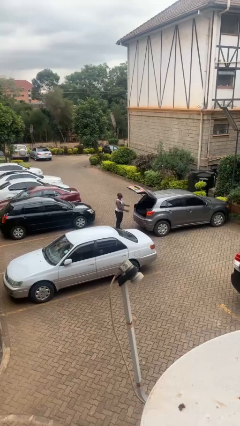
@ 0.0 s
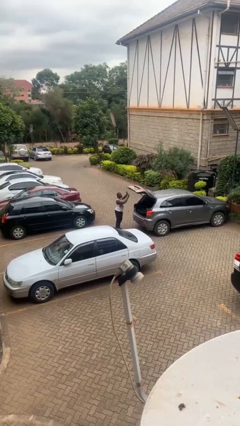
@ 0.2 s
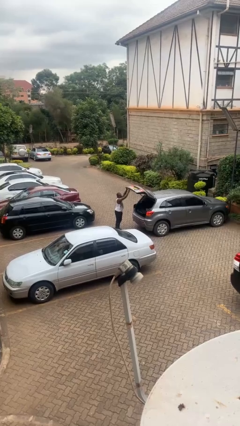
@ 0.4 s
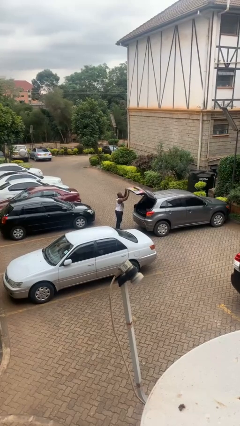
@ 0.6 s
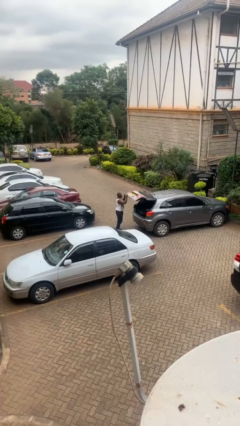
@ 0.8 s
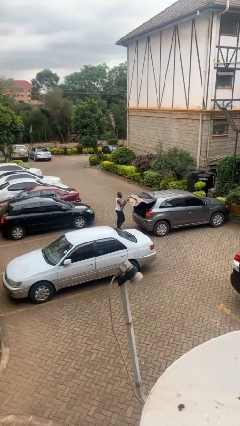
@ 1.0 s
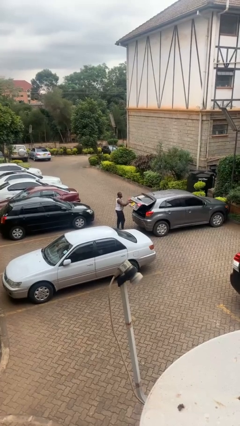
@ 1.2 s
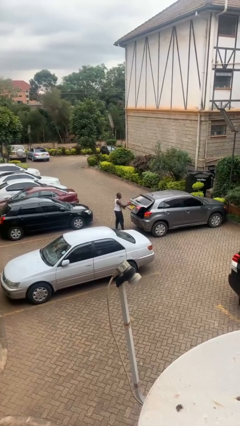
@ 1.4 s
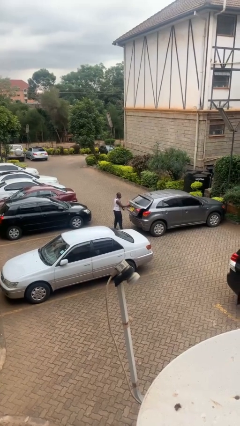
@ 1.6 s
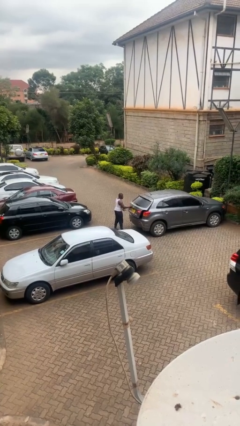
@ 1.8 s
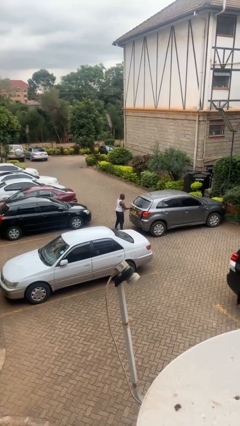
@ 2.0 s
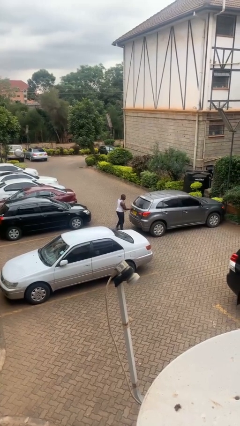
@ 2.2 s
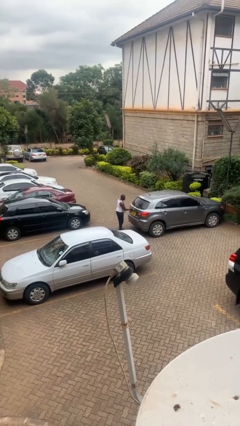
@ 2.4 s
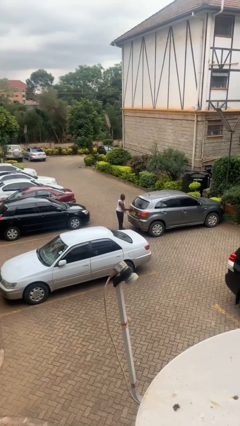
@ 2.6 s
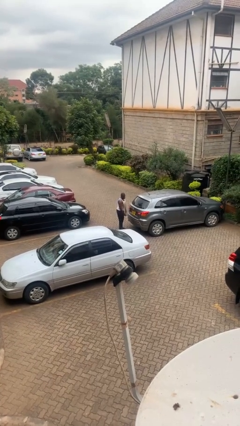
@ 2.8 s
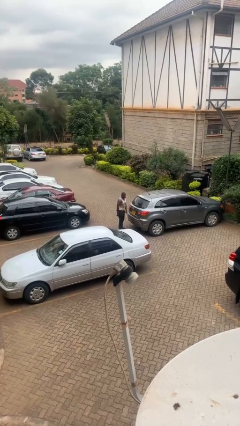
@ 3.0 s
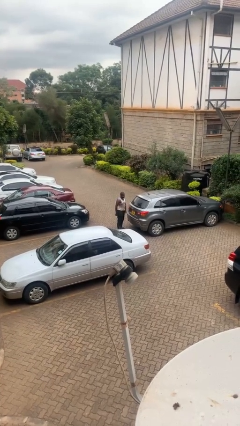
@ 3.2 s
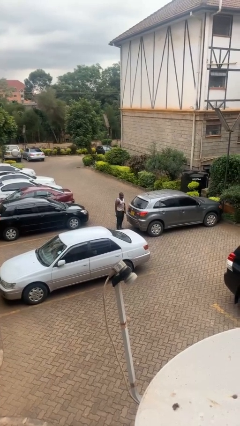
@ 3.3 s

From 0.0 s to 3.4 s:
person closes car trunk

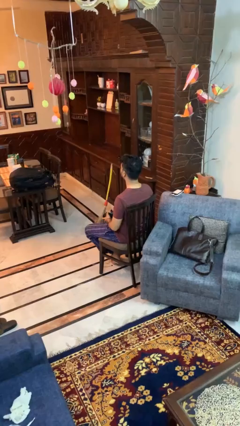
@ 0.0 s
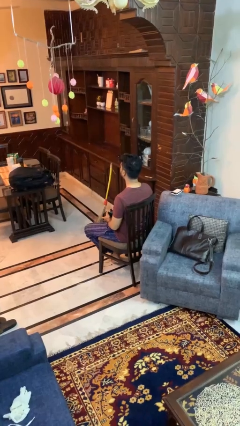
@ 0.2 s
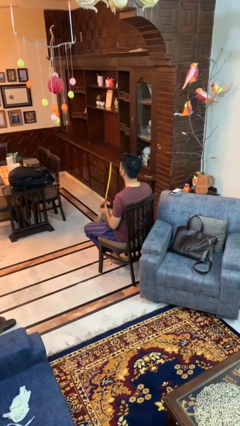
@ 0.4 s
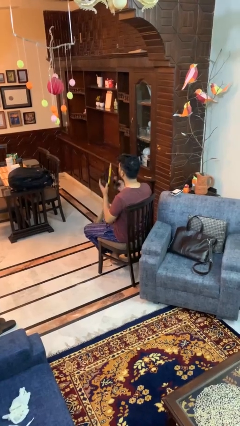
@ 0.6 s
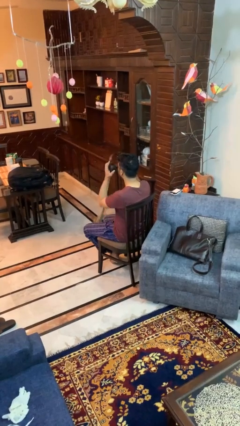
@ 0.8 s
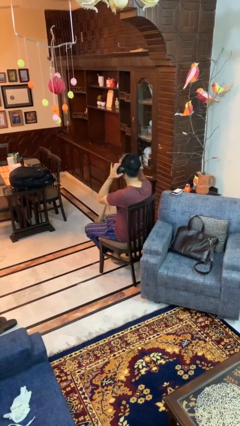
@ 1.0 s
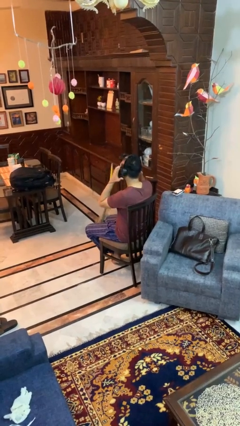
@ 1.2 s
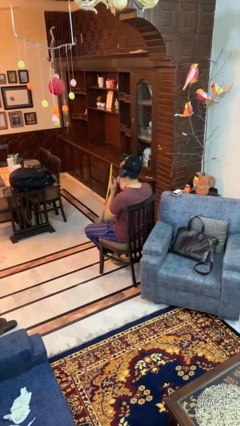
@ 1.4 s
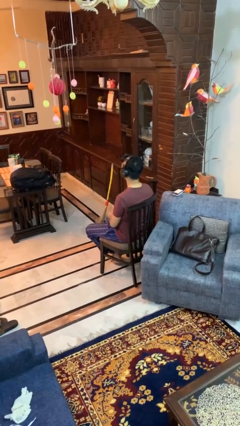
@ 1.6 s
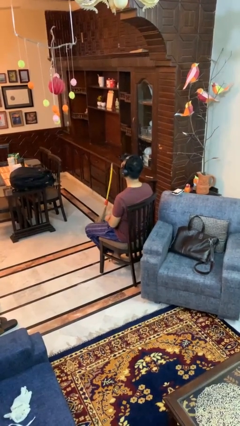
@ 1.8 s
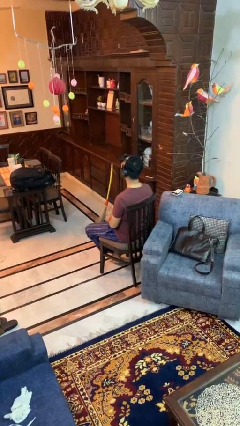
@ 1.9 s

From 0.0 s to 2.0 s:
person puts on headphones

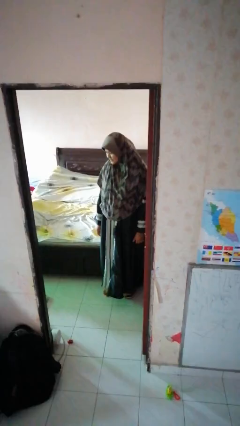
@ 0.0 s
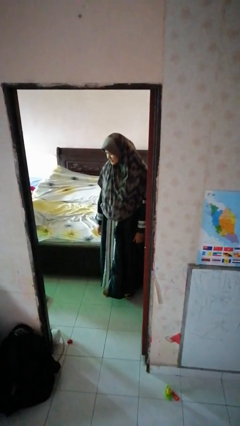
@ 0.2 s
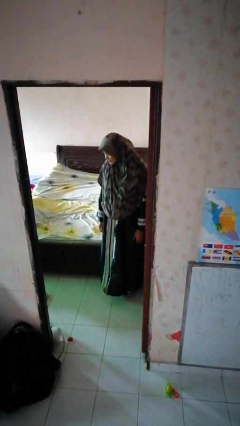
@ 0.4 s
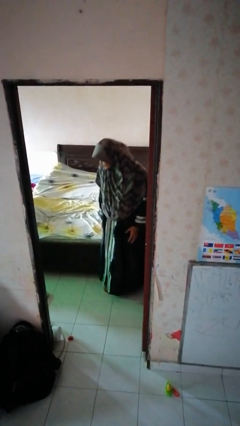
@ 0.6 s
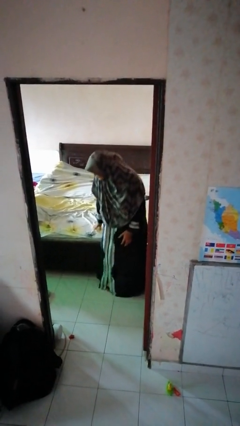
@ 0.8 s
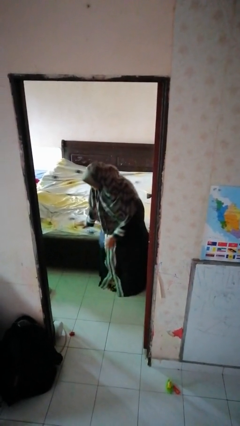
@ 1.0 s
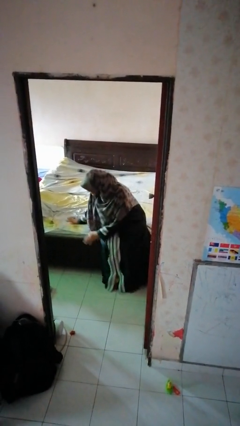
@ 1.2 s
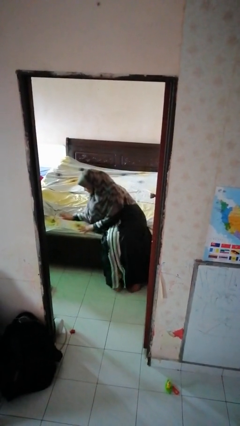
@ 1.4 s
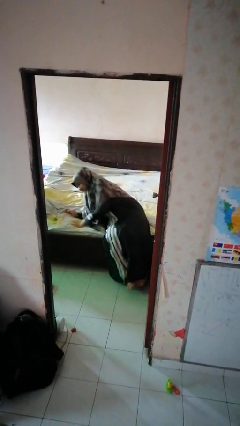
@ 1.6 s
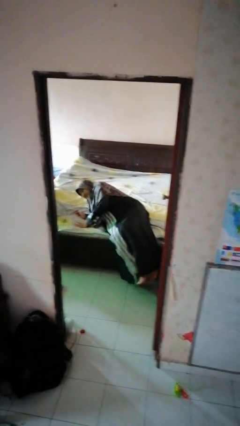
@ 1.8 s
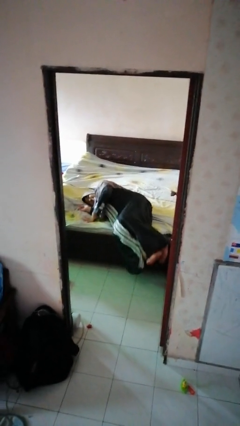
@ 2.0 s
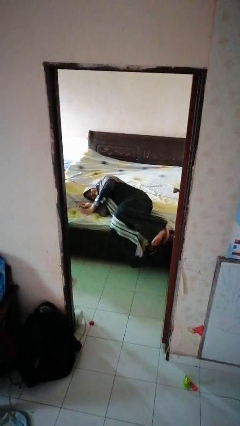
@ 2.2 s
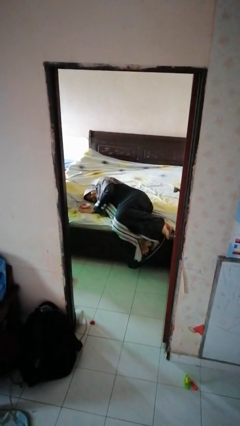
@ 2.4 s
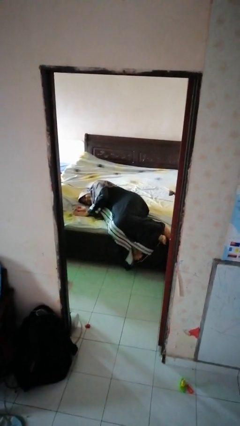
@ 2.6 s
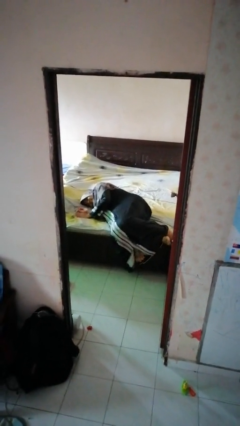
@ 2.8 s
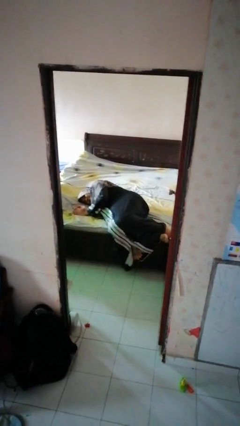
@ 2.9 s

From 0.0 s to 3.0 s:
person lies down on bed

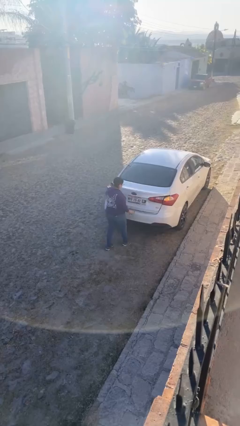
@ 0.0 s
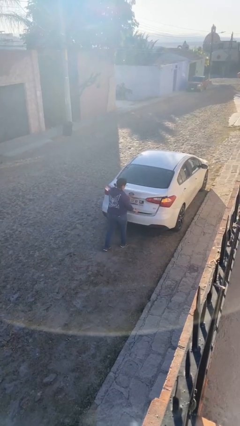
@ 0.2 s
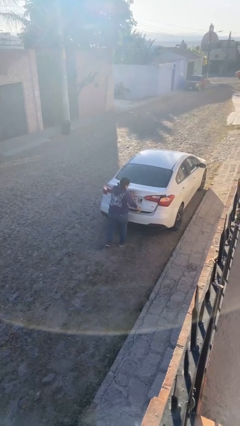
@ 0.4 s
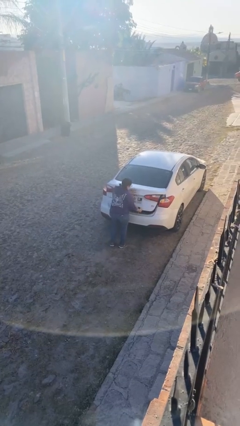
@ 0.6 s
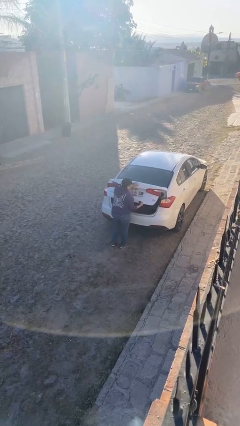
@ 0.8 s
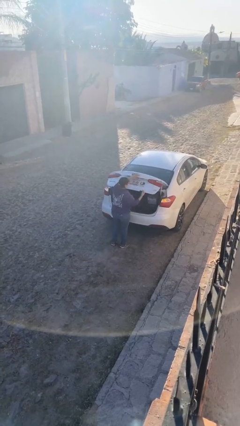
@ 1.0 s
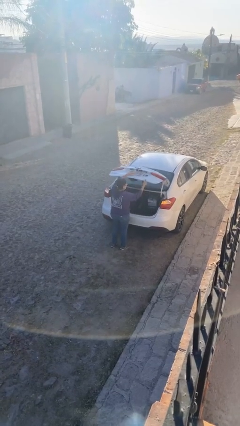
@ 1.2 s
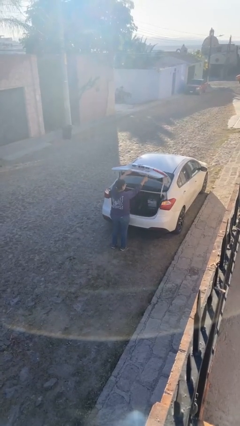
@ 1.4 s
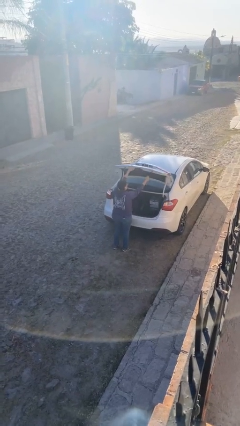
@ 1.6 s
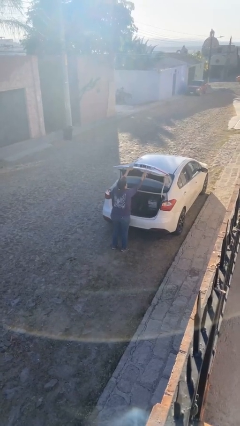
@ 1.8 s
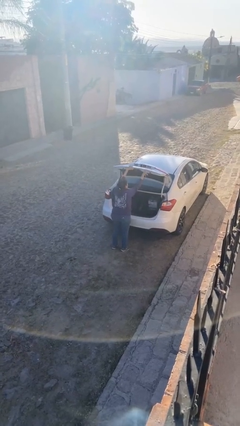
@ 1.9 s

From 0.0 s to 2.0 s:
person opens car trunk

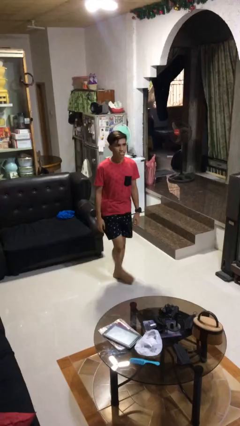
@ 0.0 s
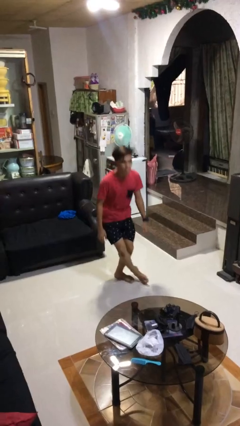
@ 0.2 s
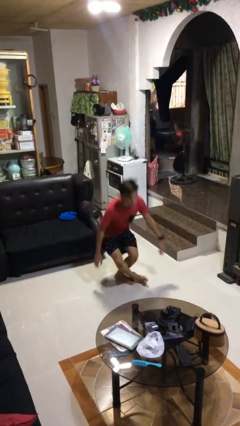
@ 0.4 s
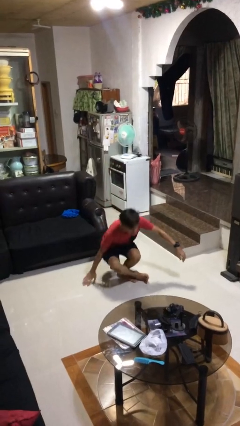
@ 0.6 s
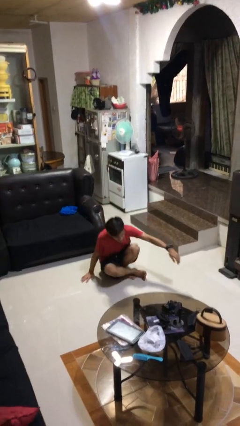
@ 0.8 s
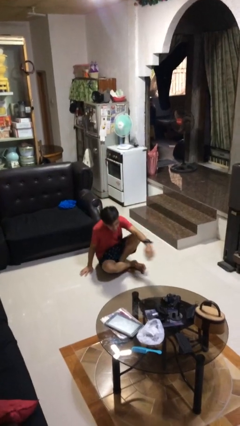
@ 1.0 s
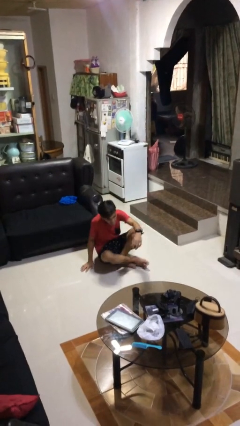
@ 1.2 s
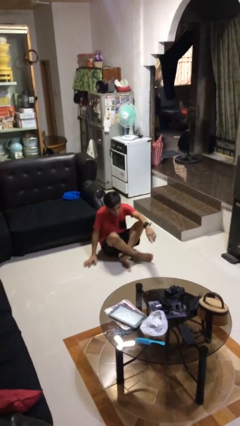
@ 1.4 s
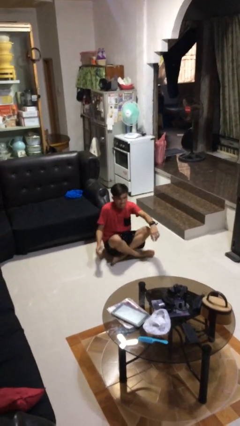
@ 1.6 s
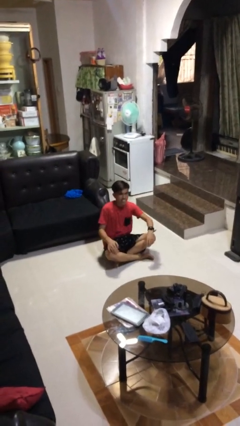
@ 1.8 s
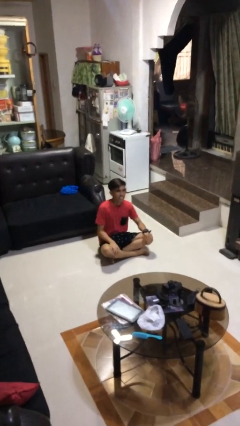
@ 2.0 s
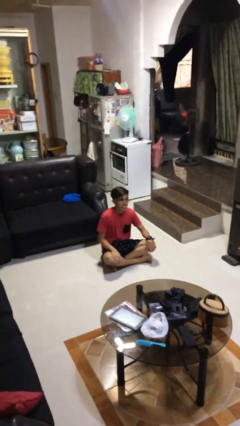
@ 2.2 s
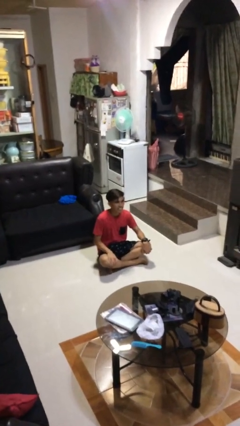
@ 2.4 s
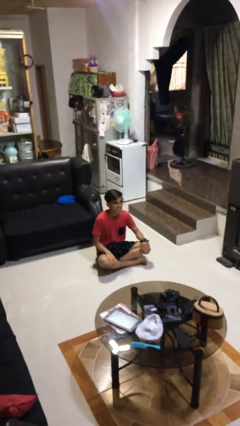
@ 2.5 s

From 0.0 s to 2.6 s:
person sits crisscross

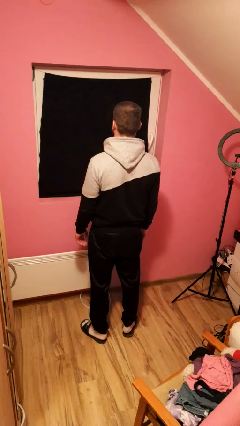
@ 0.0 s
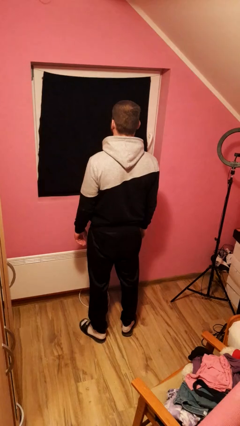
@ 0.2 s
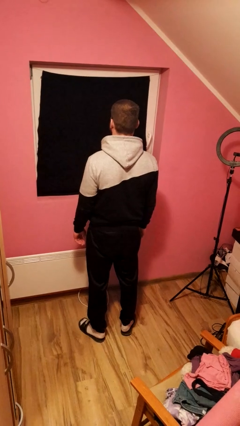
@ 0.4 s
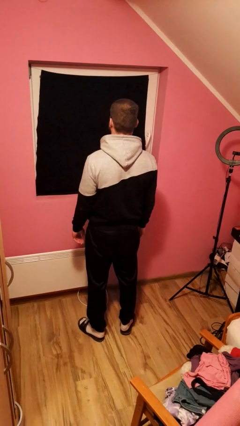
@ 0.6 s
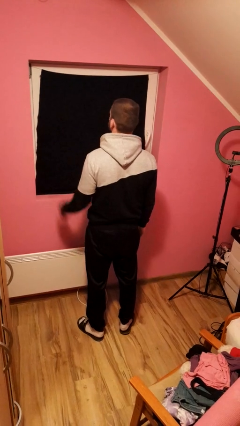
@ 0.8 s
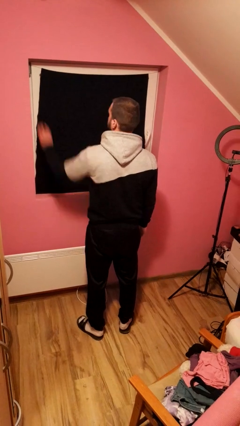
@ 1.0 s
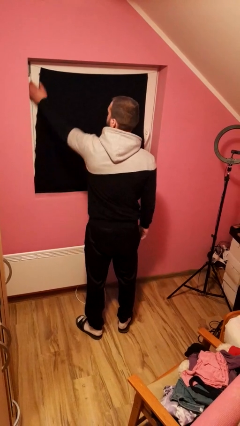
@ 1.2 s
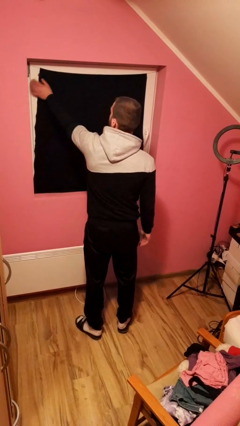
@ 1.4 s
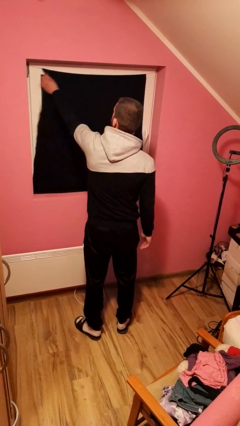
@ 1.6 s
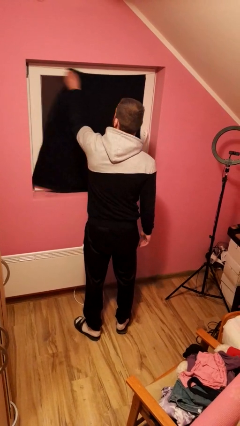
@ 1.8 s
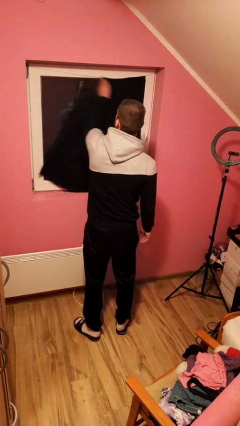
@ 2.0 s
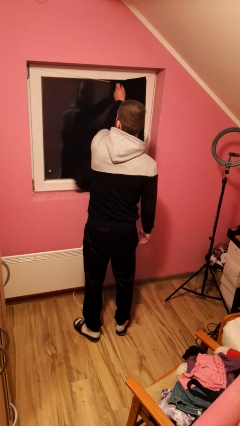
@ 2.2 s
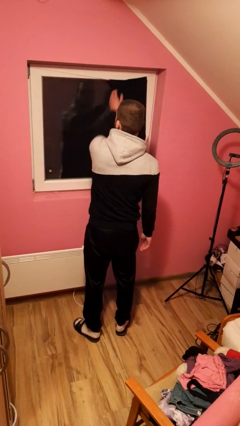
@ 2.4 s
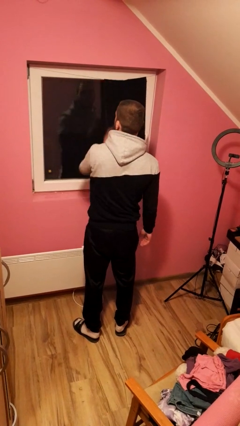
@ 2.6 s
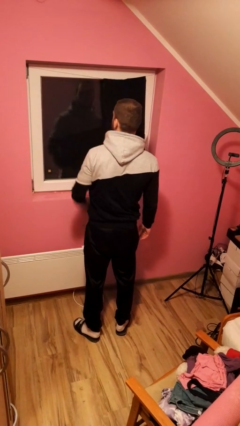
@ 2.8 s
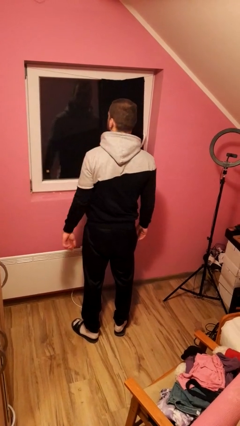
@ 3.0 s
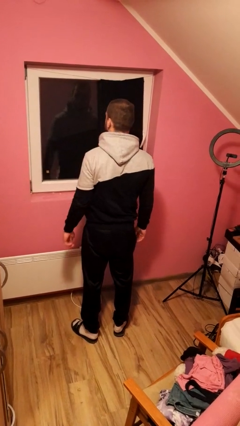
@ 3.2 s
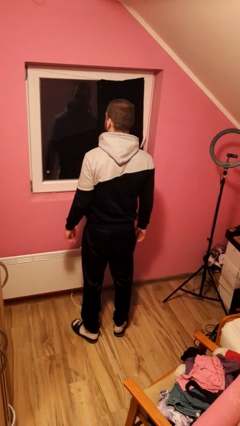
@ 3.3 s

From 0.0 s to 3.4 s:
person opens curtains

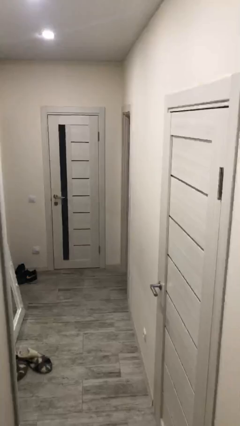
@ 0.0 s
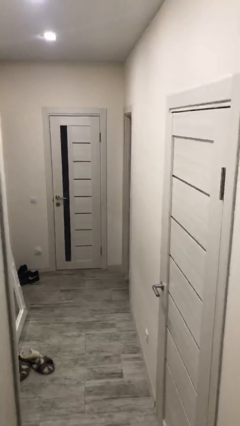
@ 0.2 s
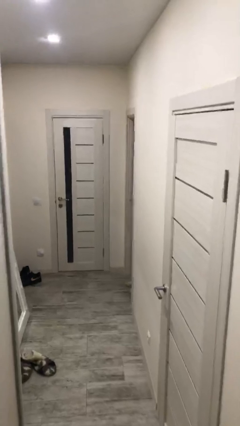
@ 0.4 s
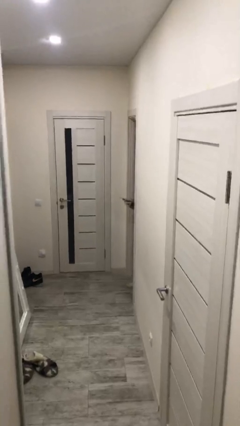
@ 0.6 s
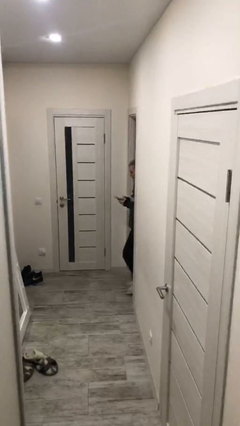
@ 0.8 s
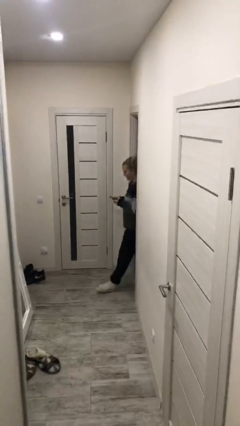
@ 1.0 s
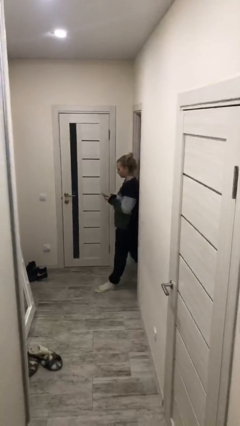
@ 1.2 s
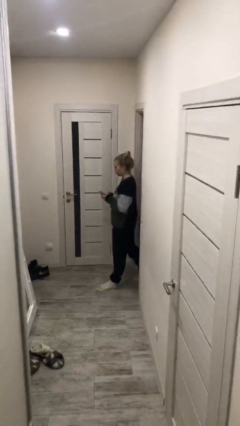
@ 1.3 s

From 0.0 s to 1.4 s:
person enters scene through structure
